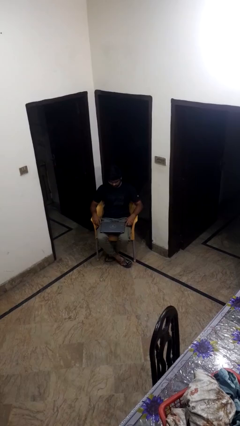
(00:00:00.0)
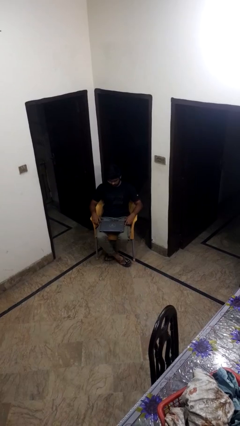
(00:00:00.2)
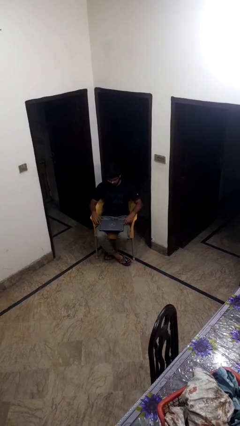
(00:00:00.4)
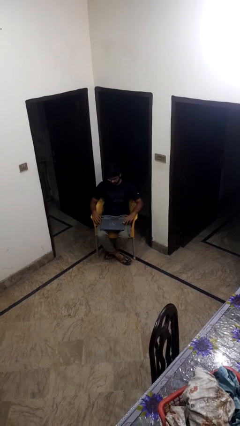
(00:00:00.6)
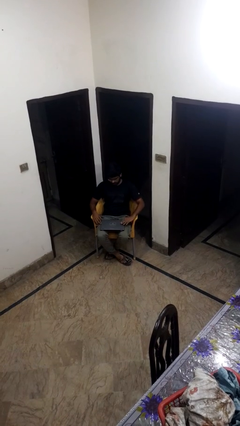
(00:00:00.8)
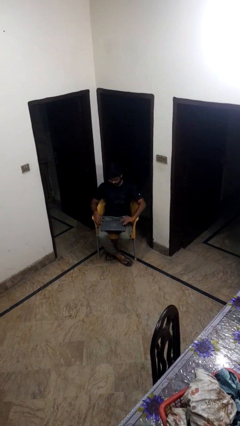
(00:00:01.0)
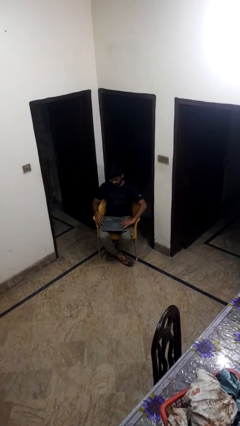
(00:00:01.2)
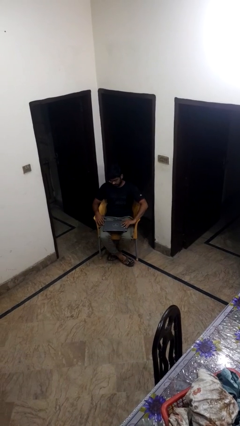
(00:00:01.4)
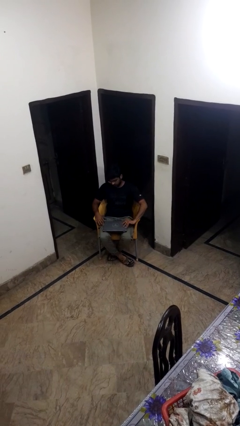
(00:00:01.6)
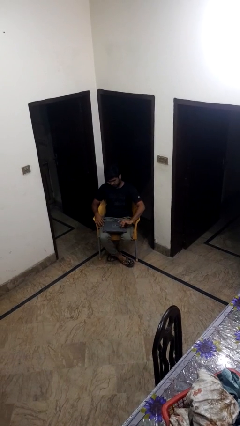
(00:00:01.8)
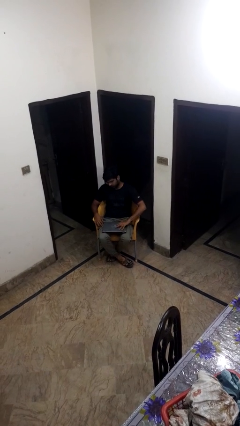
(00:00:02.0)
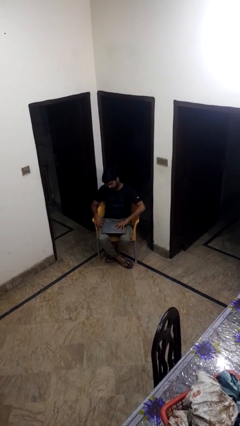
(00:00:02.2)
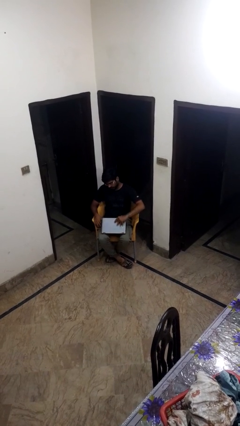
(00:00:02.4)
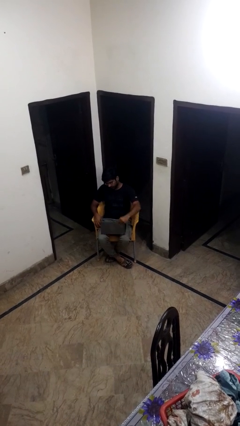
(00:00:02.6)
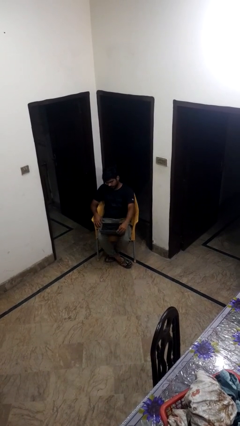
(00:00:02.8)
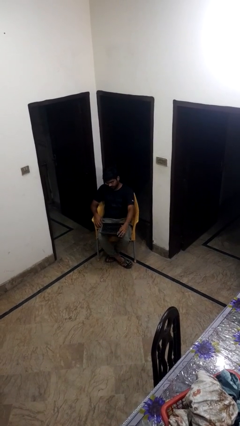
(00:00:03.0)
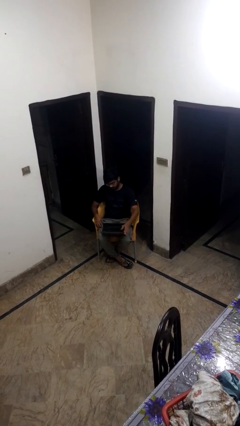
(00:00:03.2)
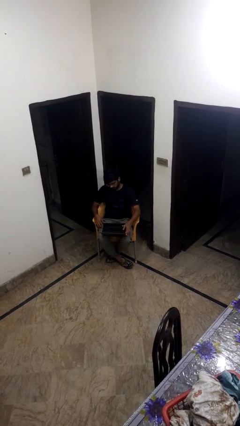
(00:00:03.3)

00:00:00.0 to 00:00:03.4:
person opens laptop

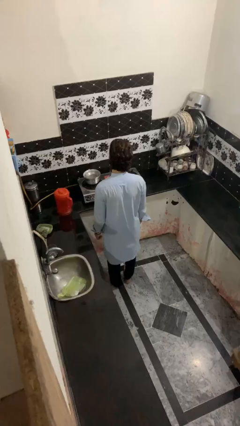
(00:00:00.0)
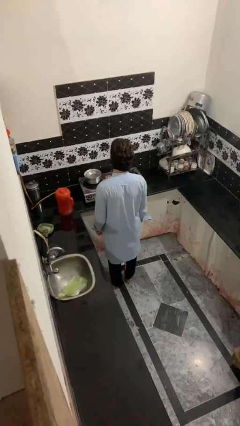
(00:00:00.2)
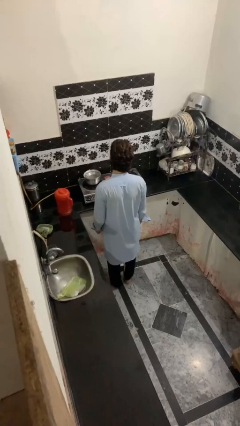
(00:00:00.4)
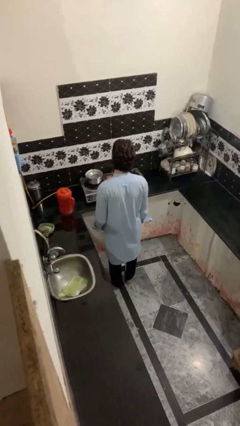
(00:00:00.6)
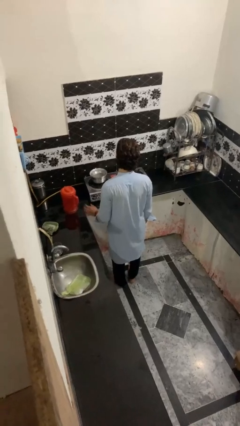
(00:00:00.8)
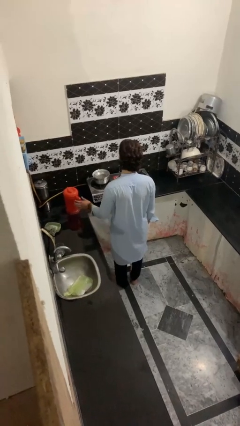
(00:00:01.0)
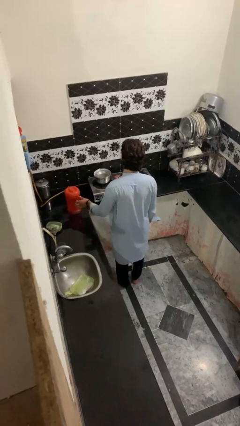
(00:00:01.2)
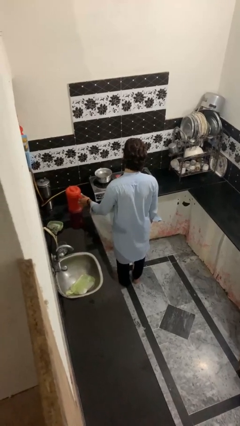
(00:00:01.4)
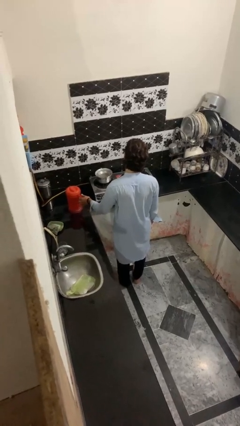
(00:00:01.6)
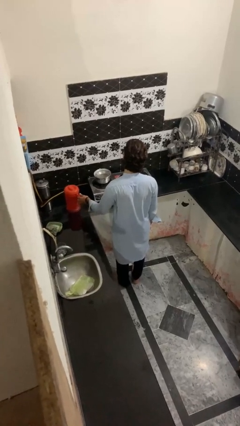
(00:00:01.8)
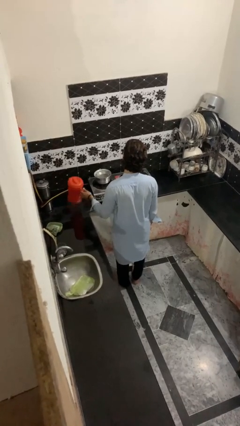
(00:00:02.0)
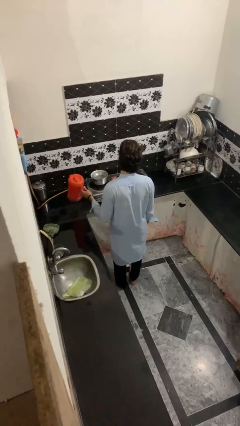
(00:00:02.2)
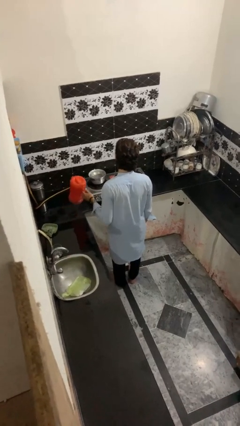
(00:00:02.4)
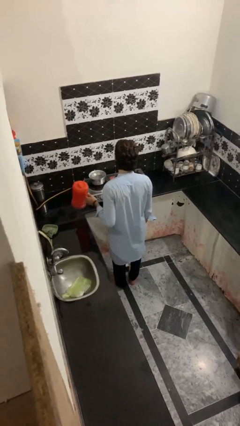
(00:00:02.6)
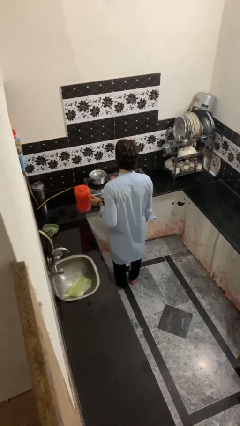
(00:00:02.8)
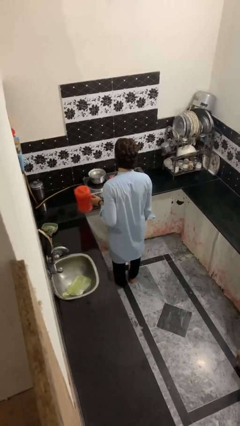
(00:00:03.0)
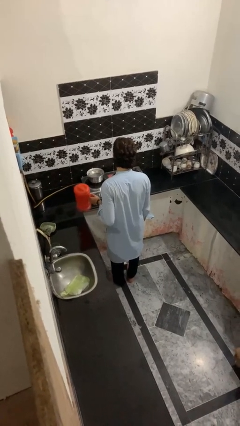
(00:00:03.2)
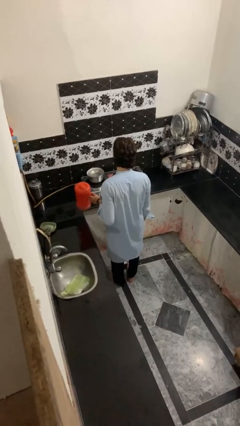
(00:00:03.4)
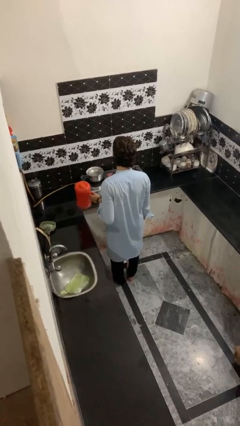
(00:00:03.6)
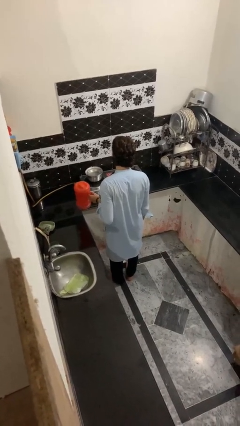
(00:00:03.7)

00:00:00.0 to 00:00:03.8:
person picks up object from countertop

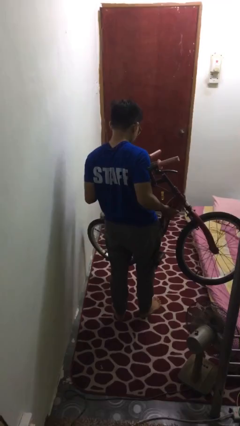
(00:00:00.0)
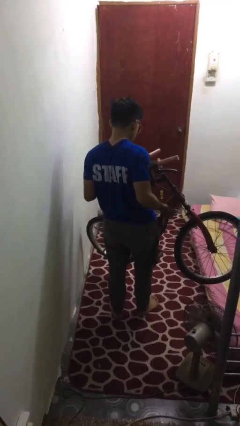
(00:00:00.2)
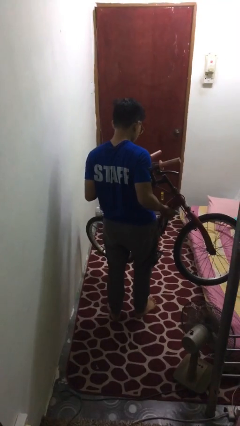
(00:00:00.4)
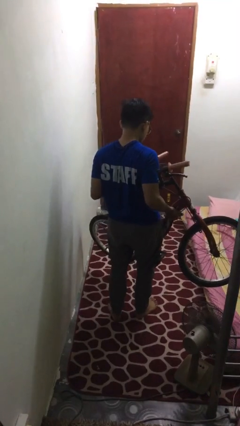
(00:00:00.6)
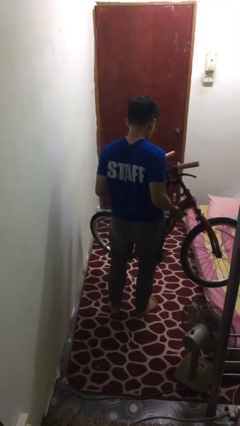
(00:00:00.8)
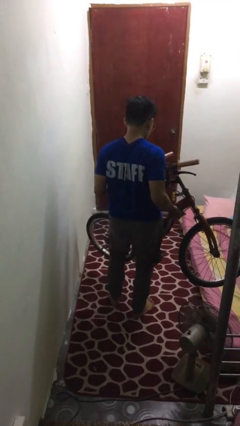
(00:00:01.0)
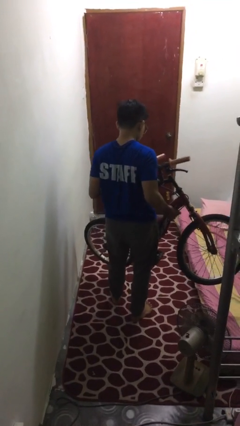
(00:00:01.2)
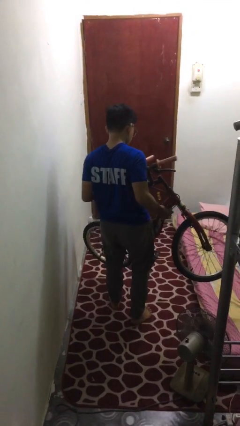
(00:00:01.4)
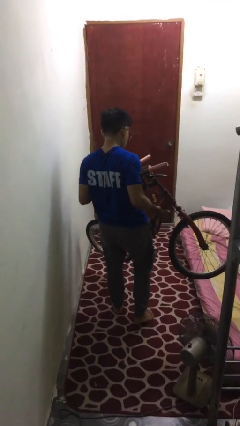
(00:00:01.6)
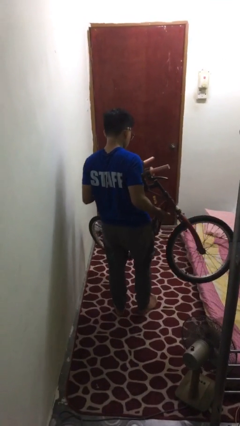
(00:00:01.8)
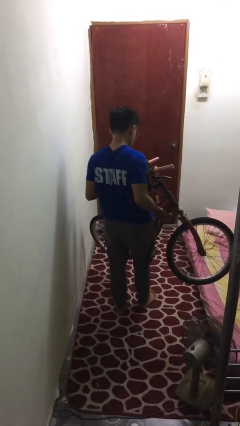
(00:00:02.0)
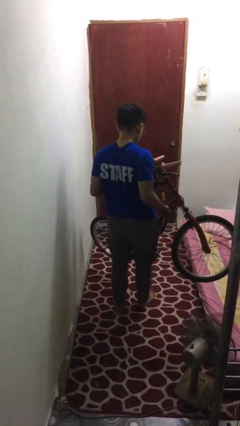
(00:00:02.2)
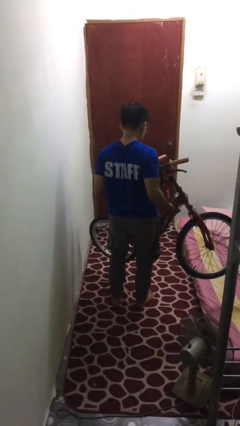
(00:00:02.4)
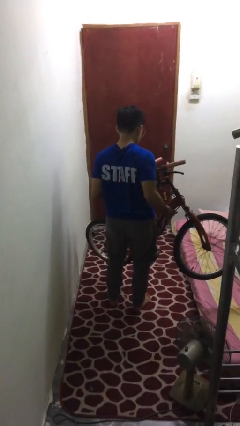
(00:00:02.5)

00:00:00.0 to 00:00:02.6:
person carries bicycle

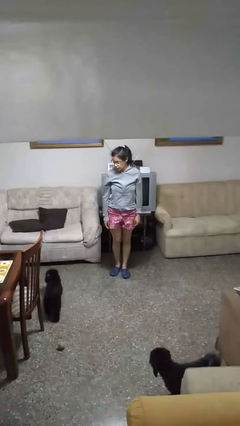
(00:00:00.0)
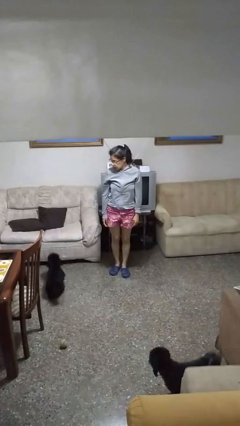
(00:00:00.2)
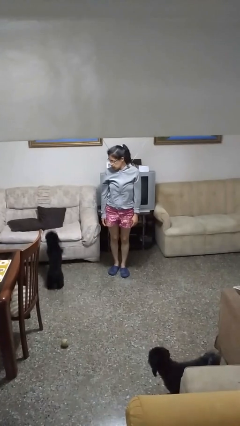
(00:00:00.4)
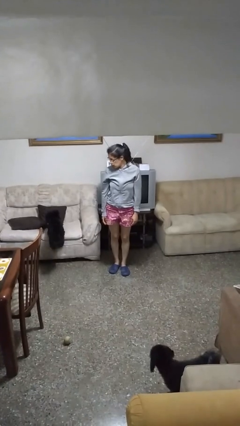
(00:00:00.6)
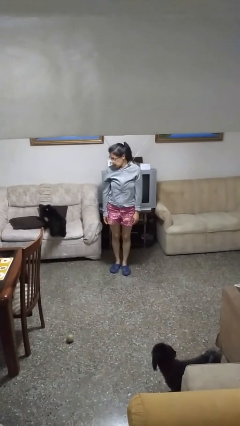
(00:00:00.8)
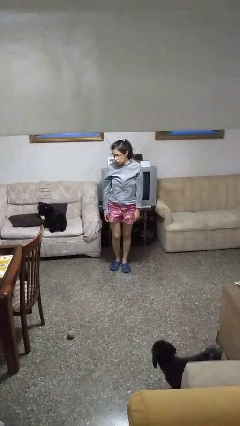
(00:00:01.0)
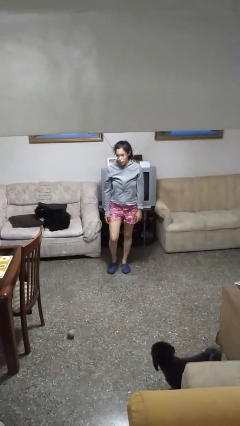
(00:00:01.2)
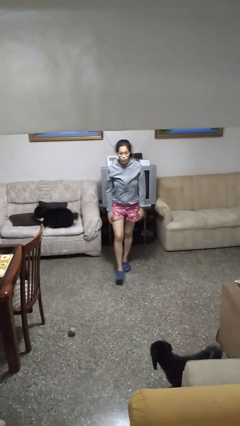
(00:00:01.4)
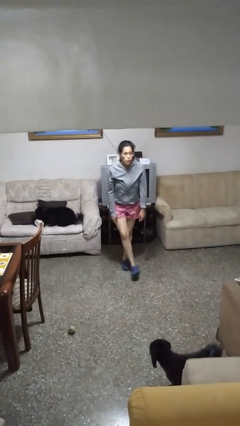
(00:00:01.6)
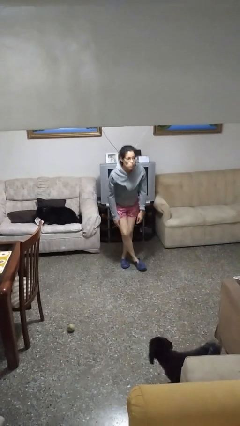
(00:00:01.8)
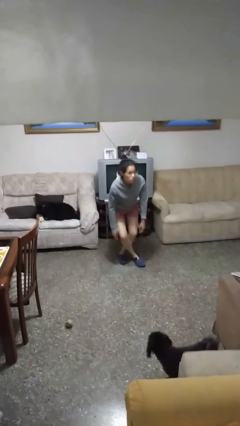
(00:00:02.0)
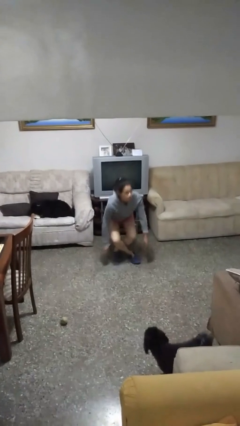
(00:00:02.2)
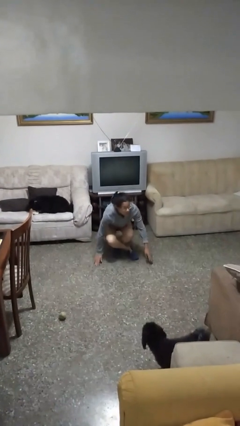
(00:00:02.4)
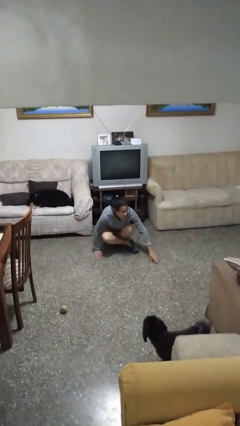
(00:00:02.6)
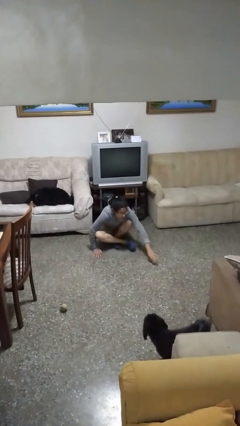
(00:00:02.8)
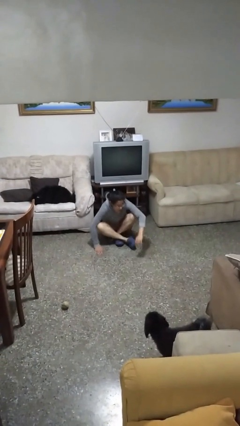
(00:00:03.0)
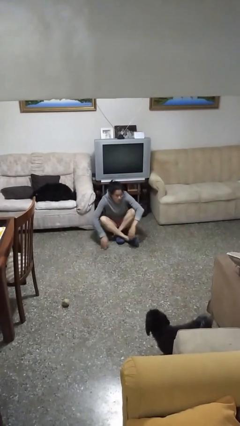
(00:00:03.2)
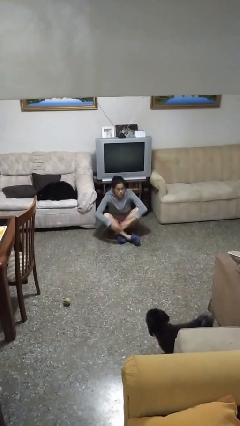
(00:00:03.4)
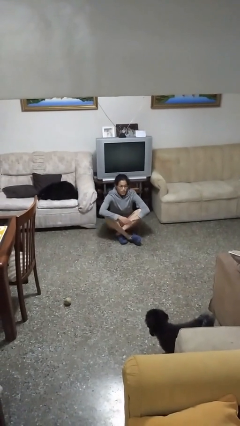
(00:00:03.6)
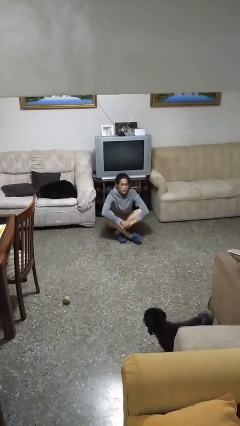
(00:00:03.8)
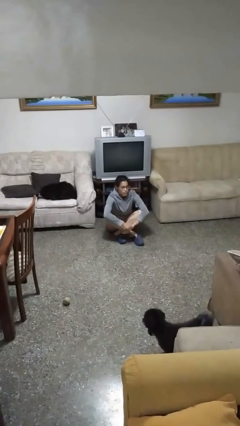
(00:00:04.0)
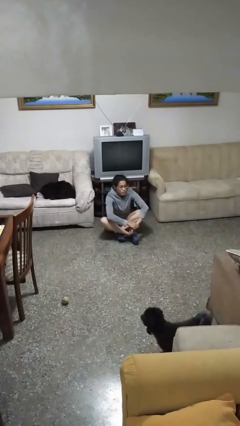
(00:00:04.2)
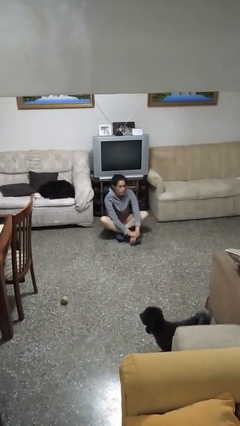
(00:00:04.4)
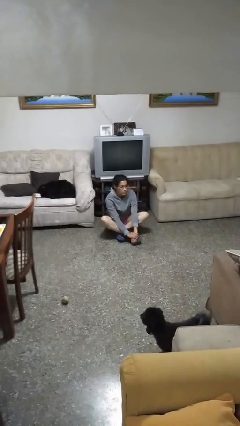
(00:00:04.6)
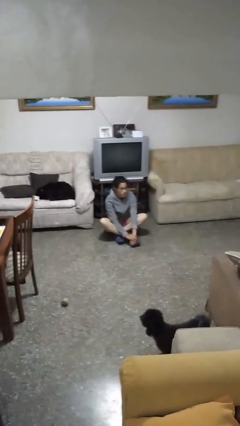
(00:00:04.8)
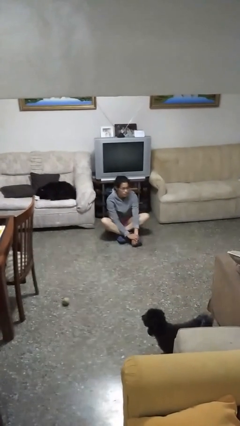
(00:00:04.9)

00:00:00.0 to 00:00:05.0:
person sits crisscross

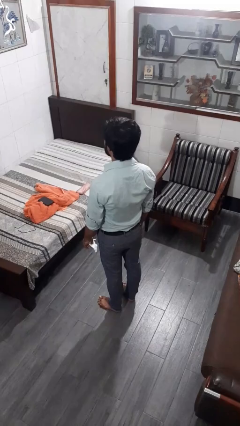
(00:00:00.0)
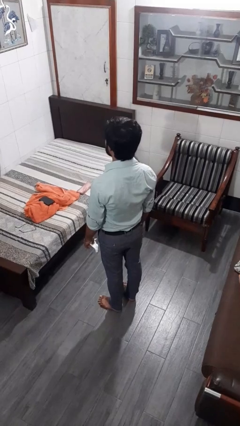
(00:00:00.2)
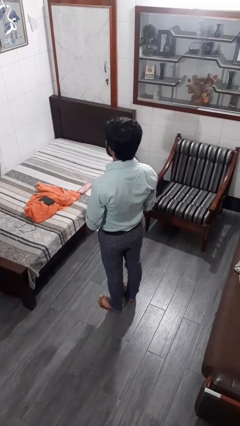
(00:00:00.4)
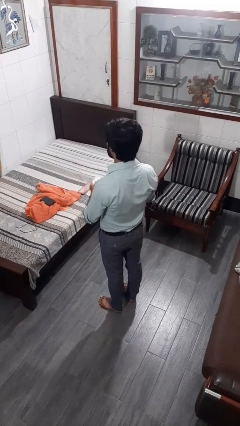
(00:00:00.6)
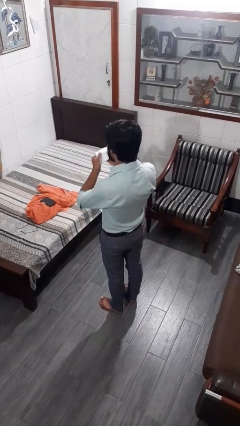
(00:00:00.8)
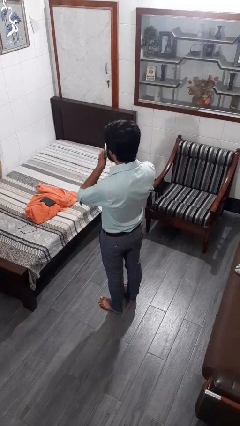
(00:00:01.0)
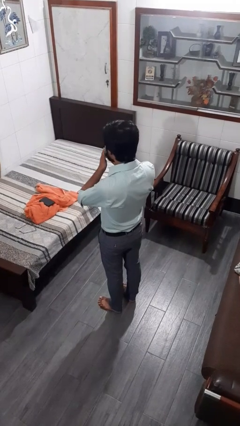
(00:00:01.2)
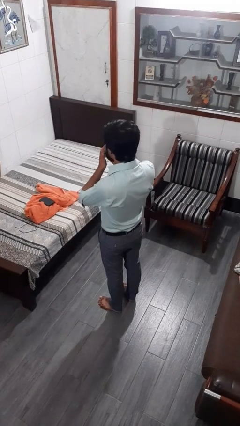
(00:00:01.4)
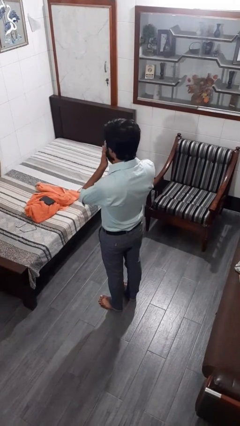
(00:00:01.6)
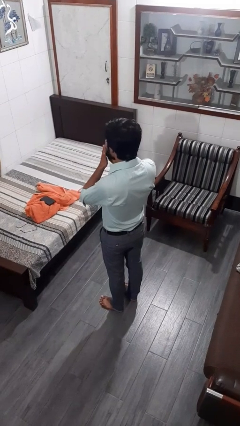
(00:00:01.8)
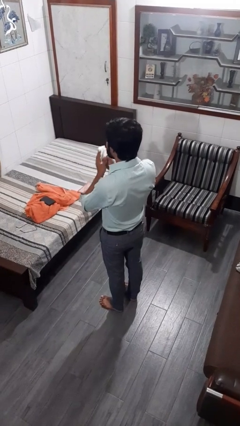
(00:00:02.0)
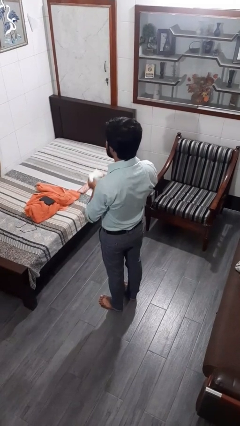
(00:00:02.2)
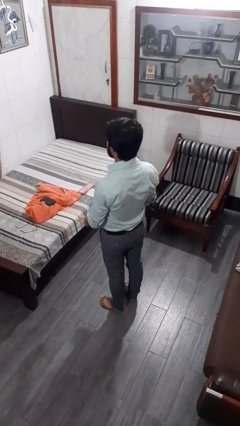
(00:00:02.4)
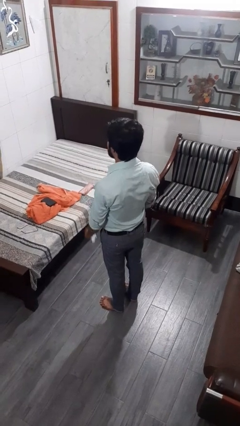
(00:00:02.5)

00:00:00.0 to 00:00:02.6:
person blows nose

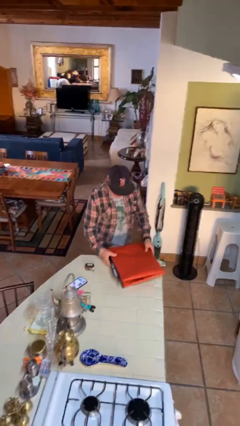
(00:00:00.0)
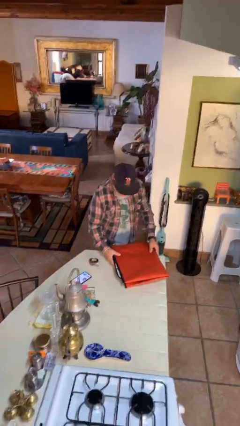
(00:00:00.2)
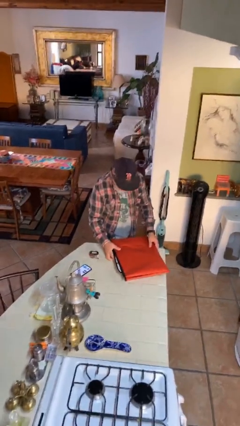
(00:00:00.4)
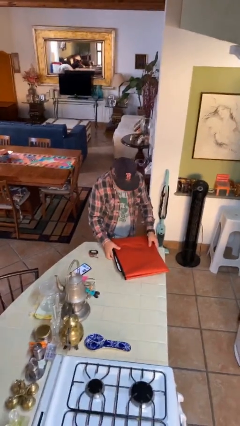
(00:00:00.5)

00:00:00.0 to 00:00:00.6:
person puts down object on table
